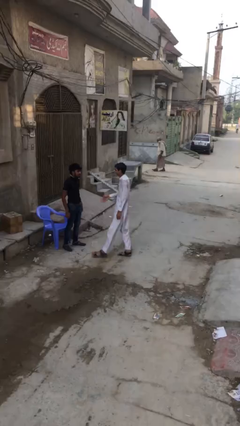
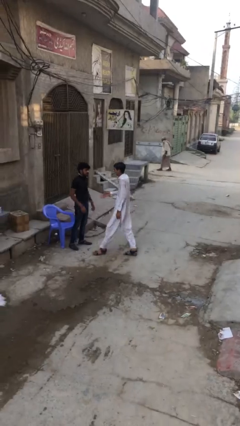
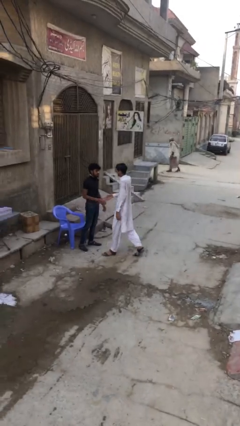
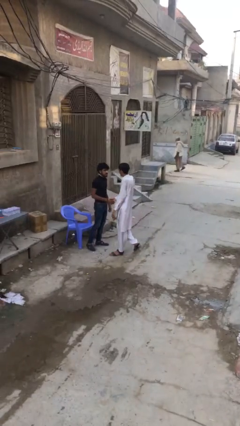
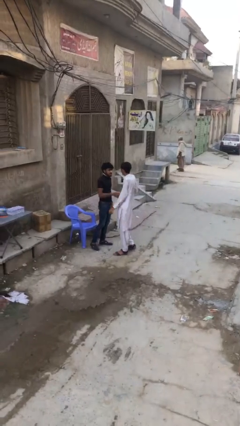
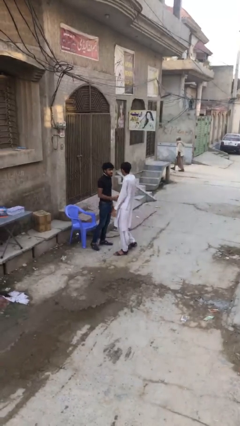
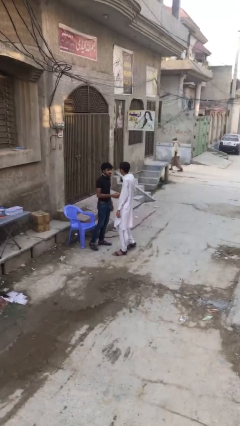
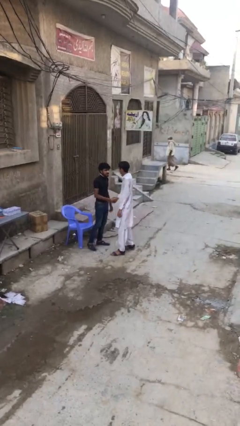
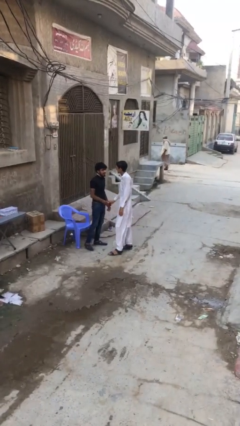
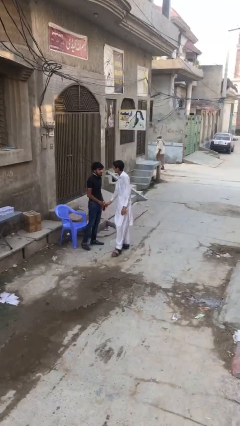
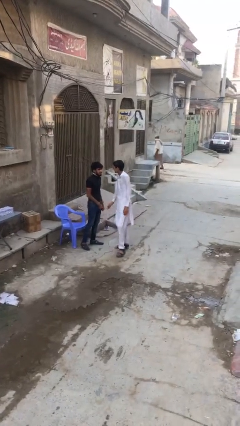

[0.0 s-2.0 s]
person shakes hand

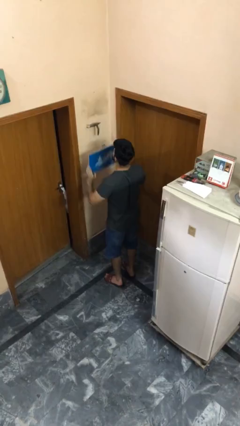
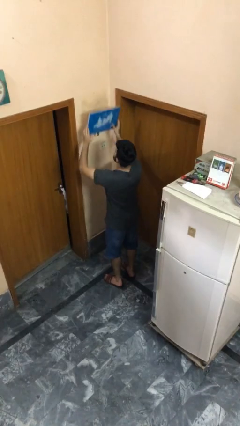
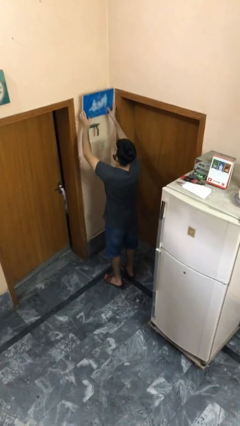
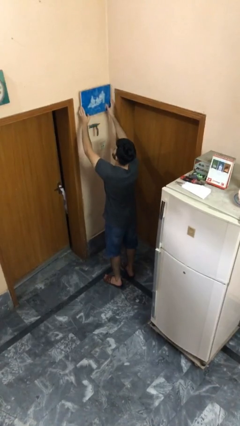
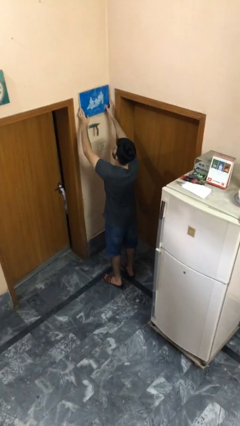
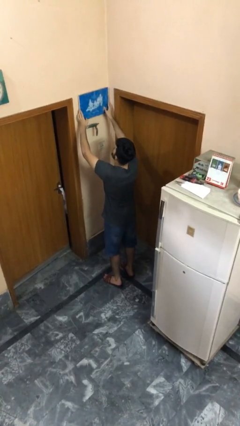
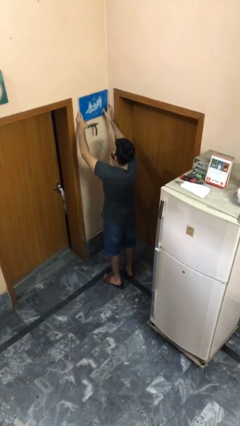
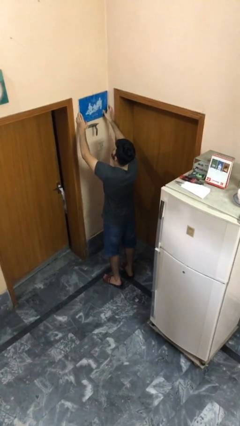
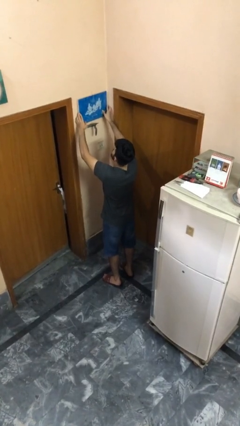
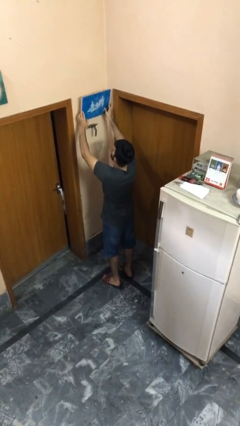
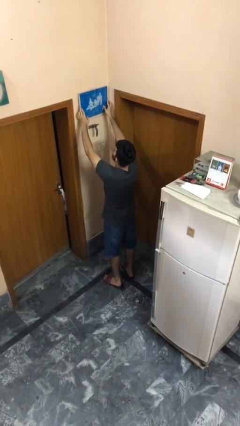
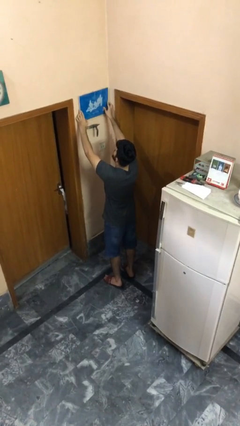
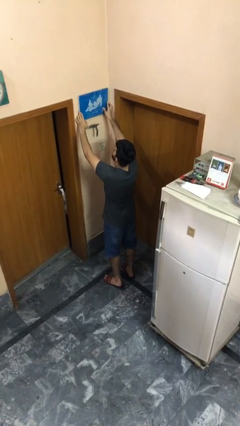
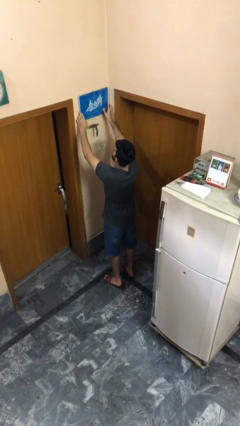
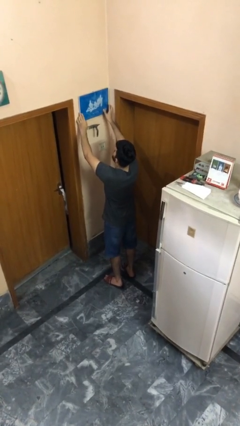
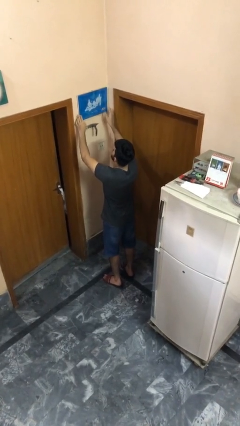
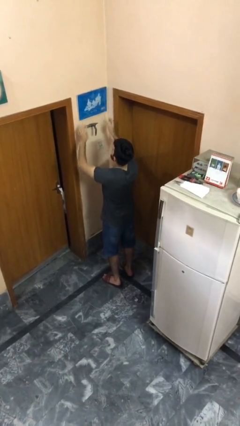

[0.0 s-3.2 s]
person puts up picture frame

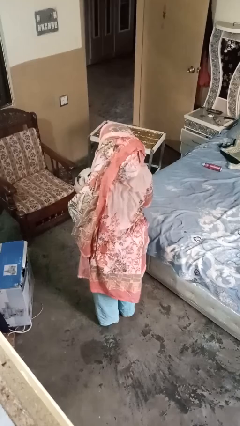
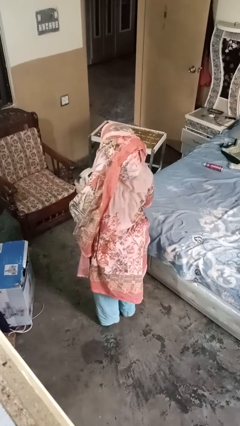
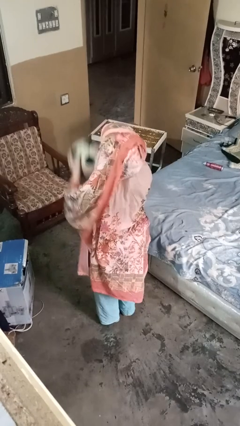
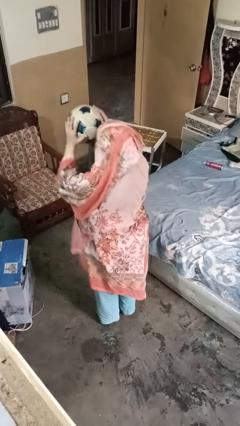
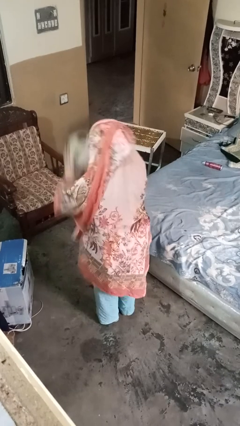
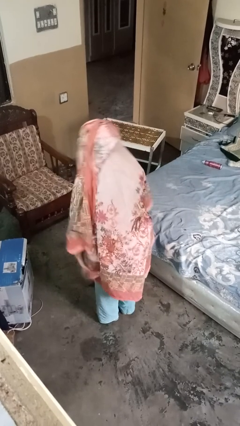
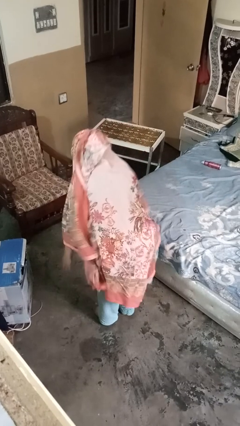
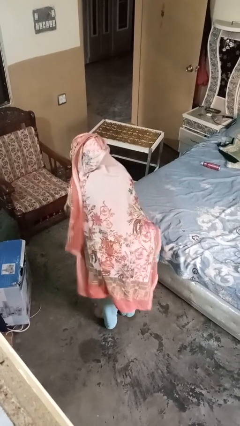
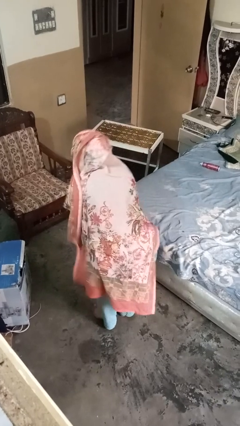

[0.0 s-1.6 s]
person bounces ball on floor

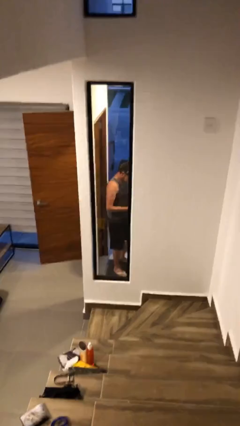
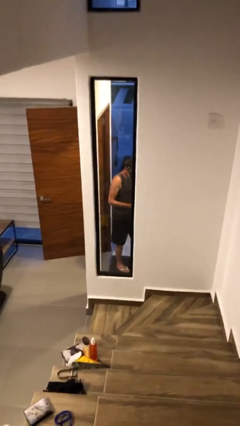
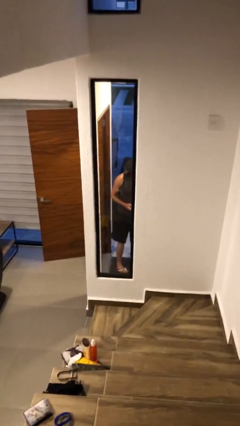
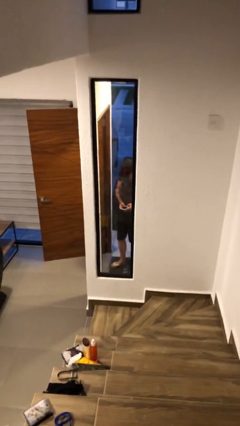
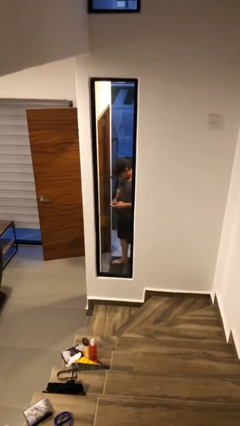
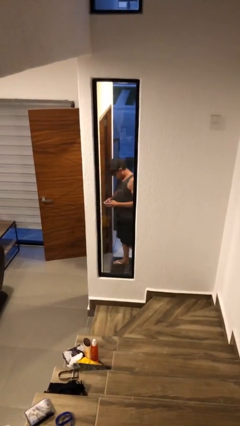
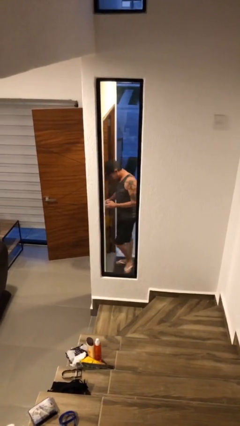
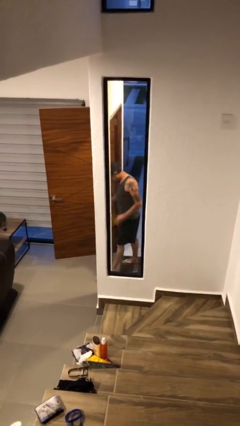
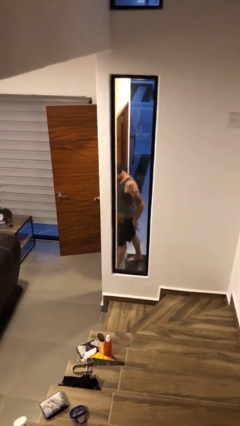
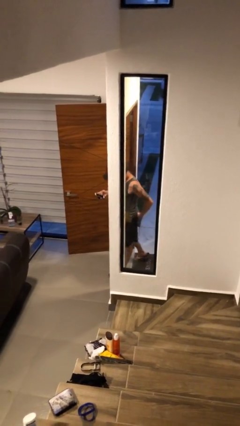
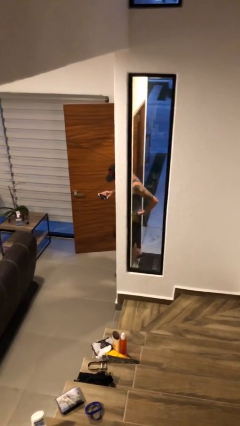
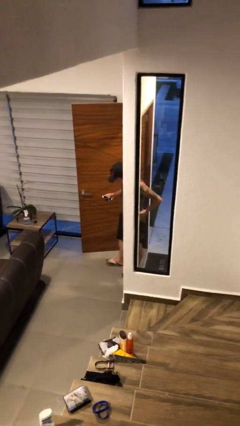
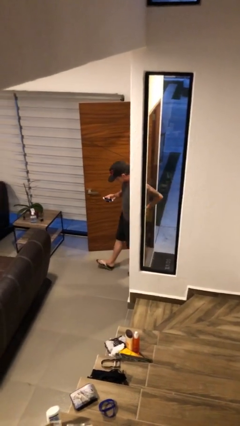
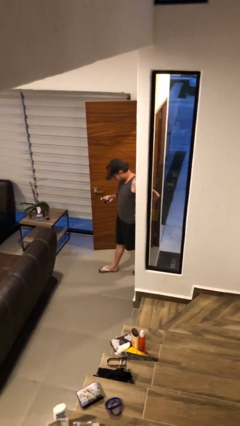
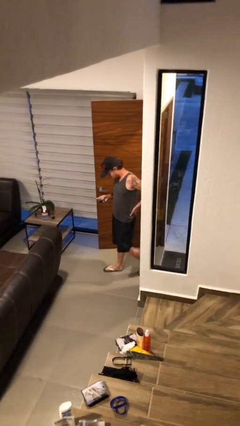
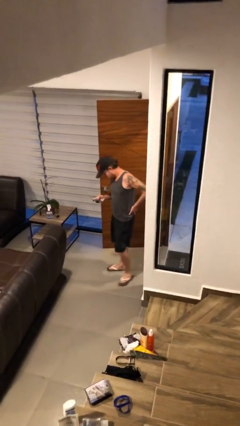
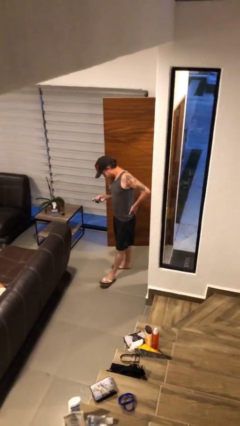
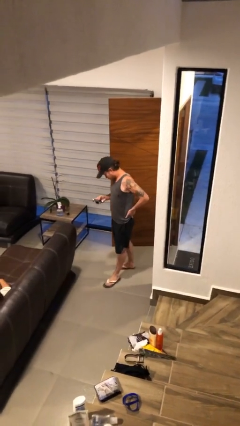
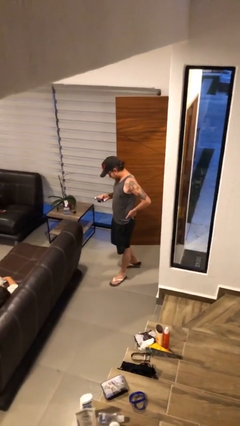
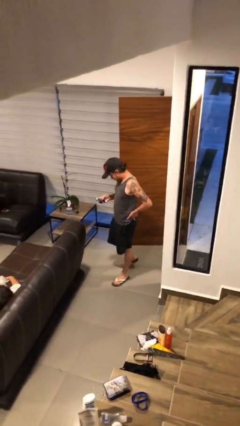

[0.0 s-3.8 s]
person enters scene through structure

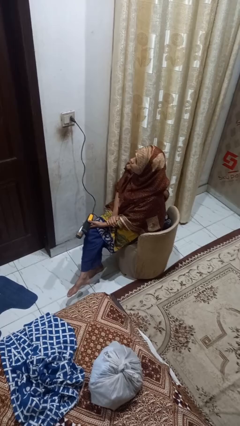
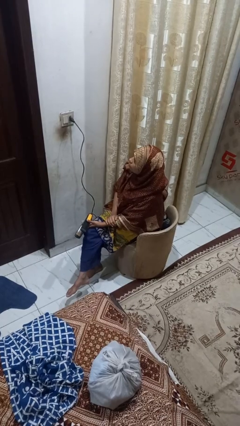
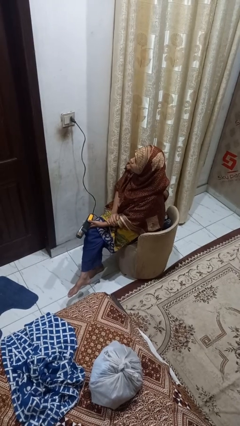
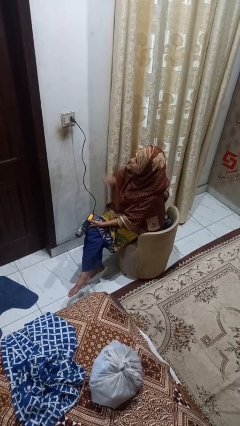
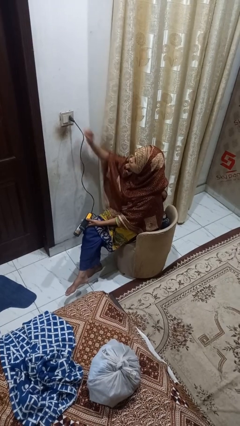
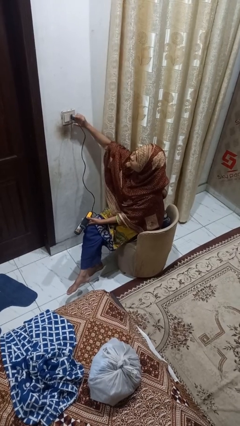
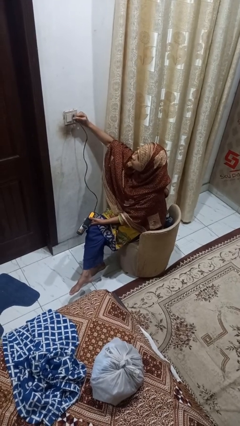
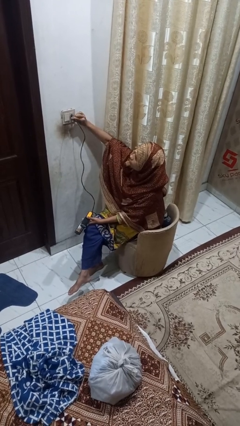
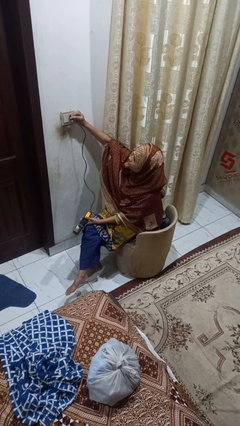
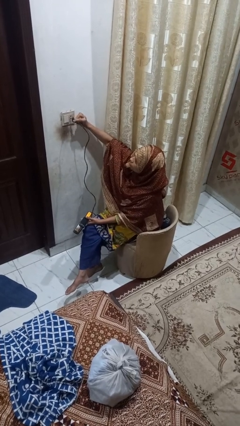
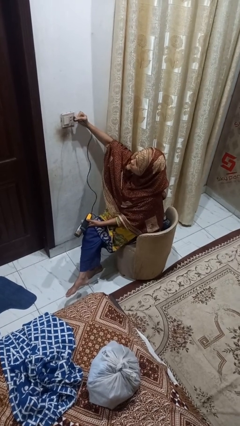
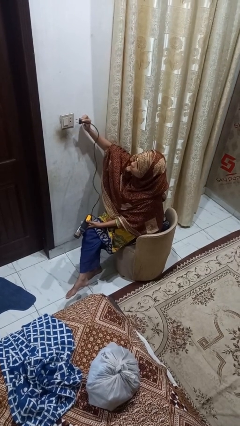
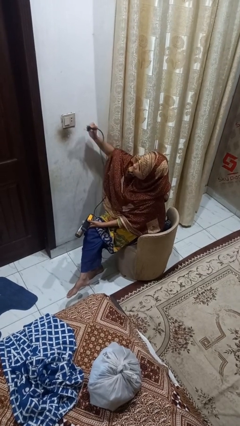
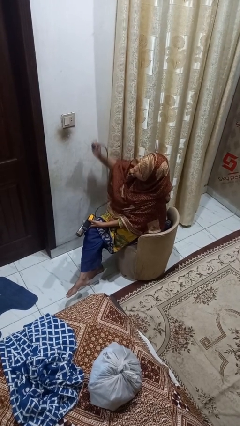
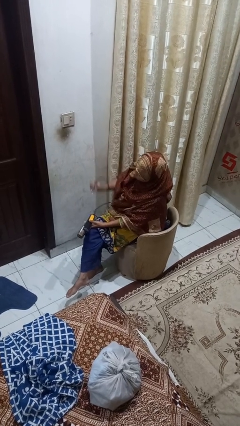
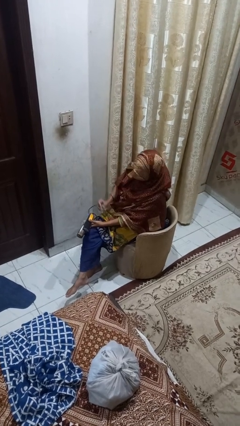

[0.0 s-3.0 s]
person unplugs from electrical socket

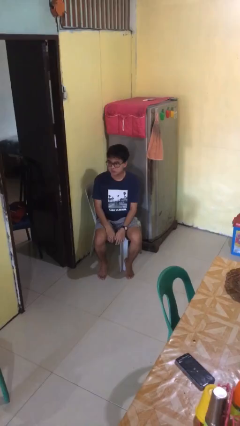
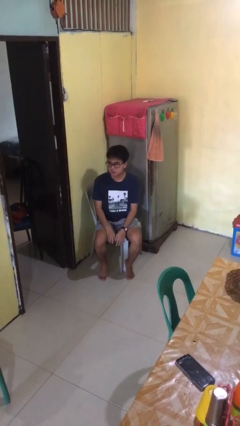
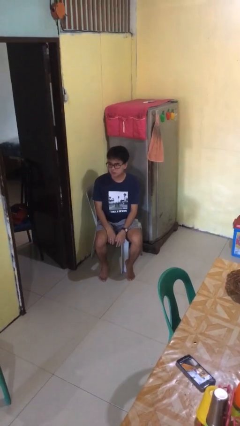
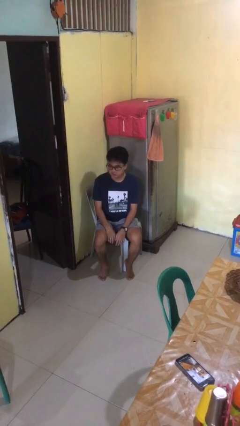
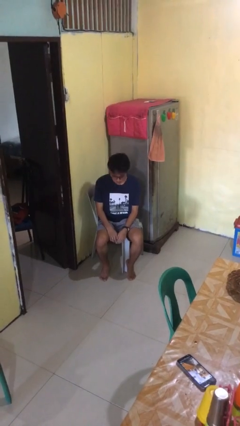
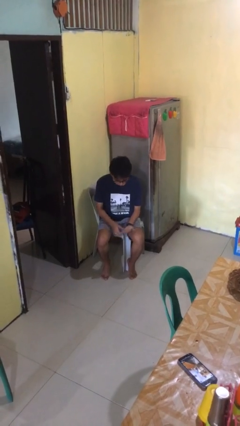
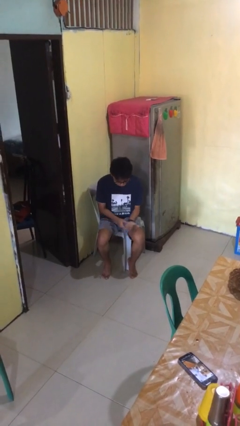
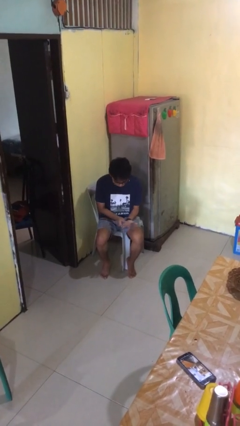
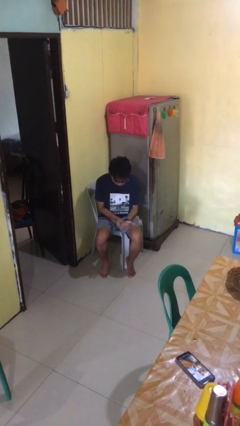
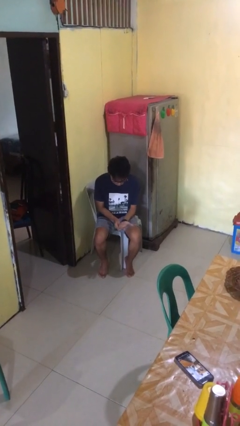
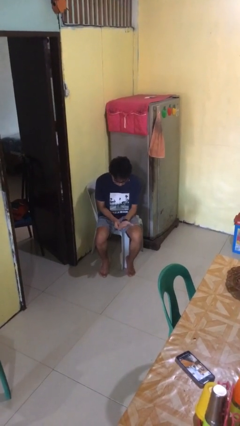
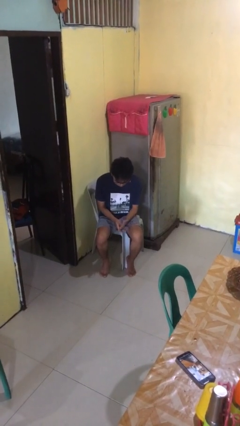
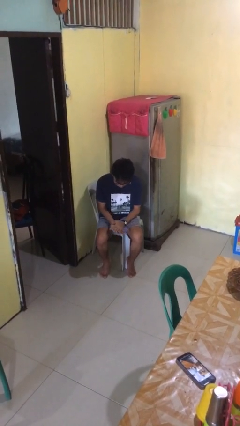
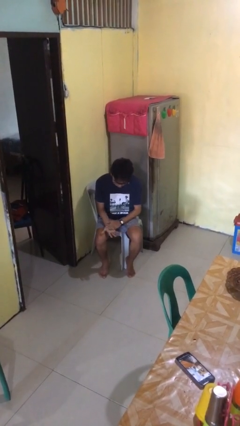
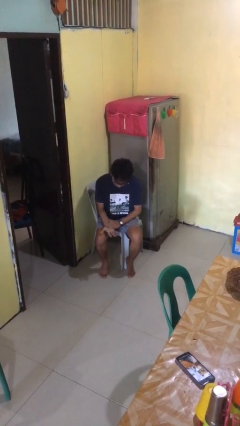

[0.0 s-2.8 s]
person looks at hands in lap

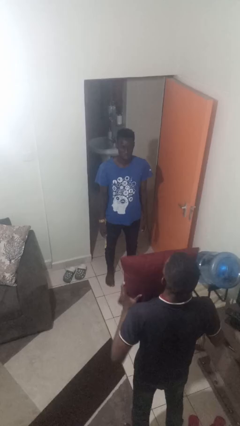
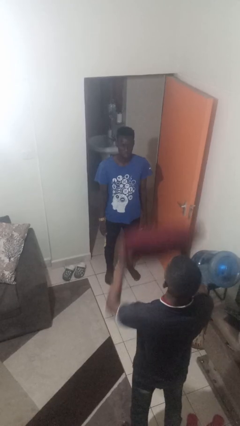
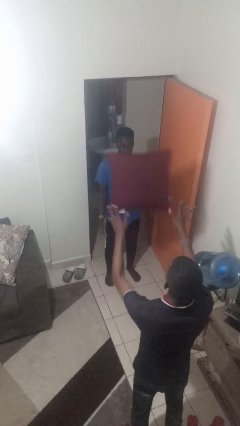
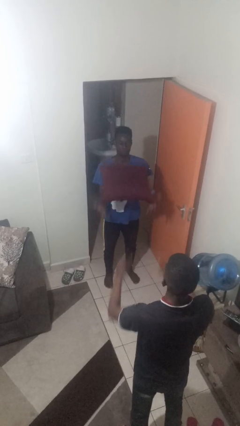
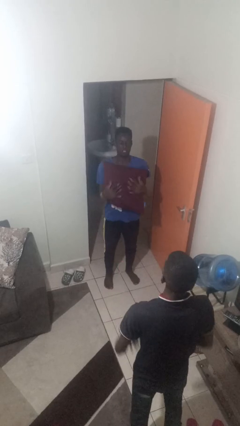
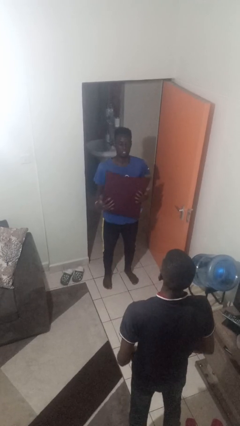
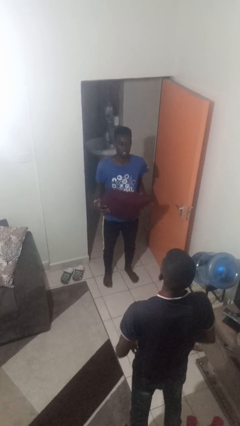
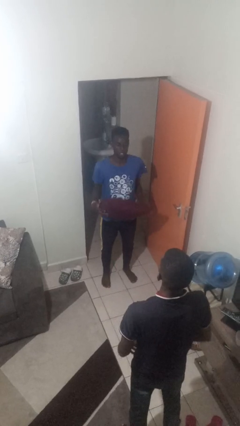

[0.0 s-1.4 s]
person catches object from person
